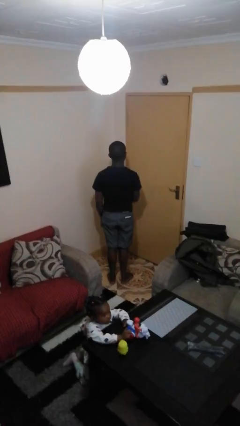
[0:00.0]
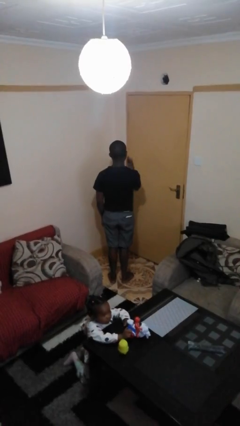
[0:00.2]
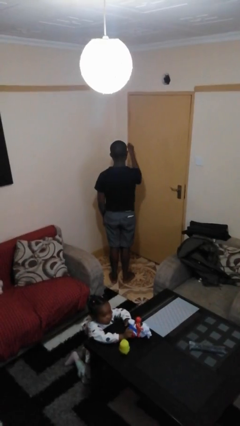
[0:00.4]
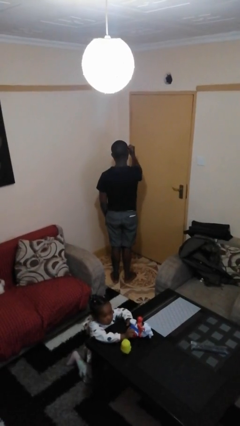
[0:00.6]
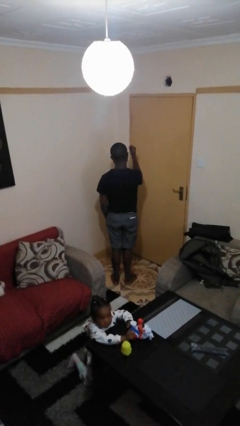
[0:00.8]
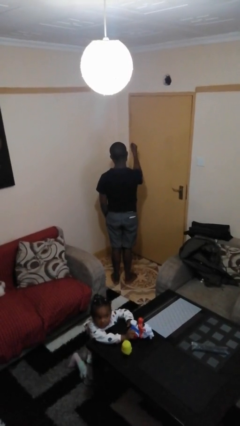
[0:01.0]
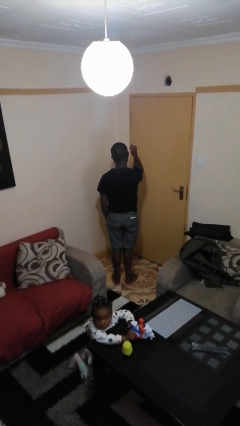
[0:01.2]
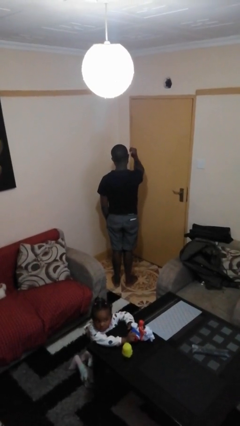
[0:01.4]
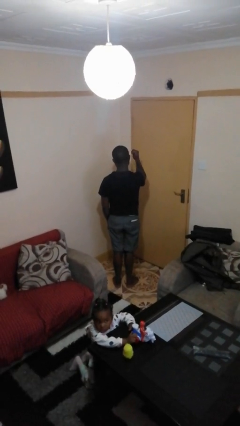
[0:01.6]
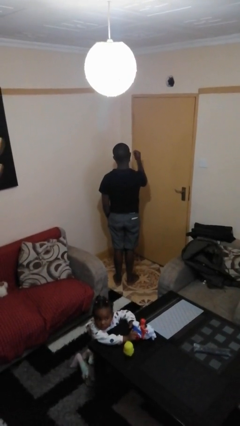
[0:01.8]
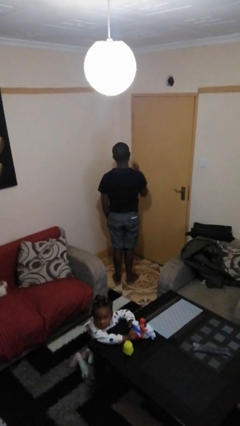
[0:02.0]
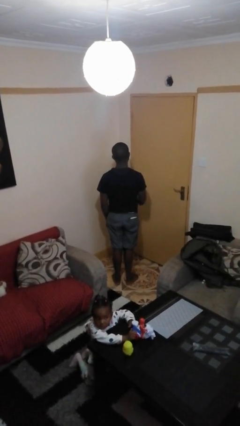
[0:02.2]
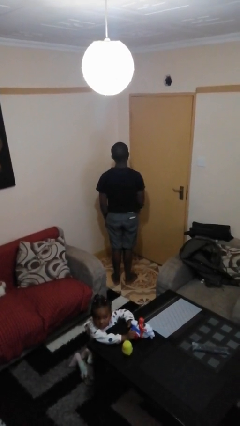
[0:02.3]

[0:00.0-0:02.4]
person gestures behind me

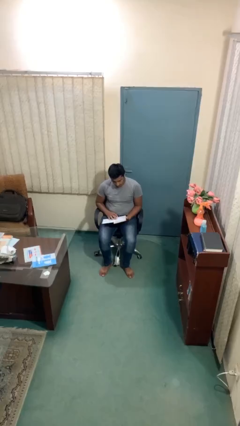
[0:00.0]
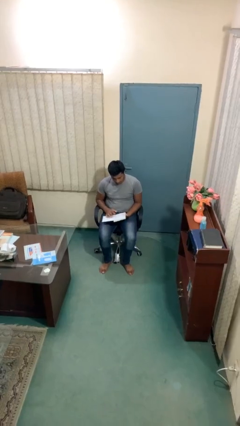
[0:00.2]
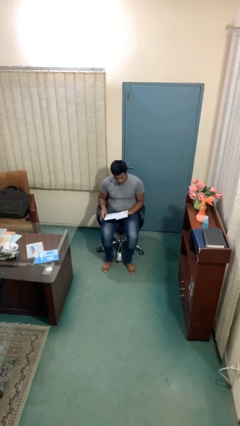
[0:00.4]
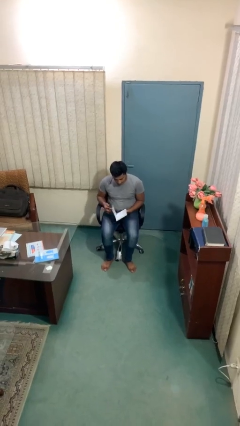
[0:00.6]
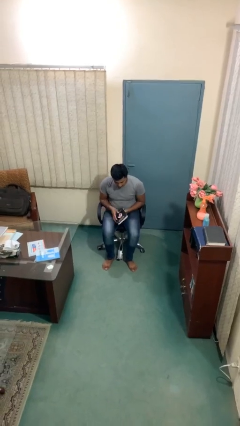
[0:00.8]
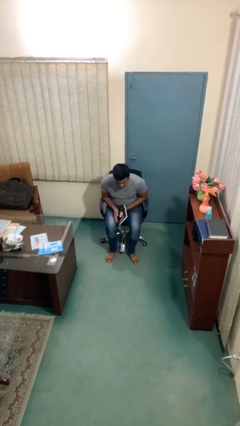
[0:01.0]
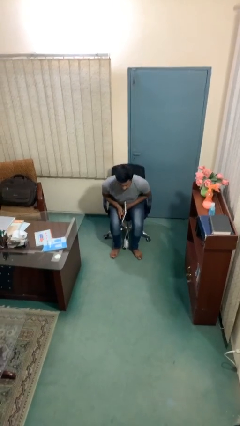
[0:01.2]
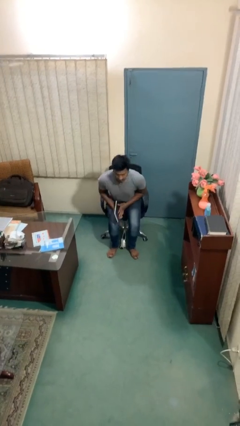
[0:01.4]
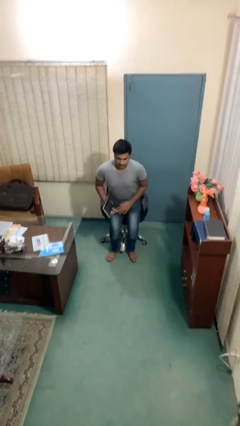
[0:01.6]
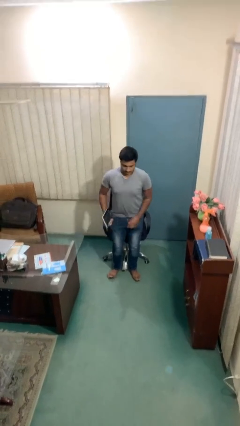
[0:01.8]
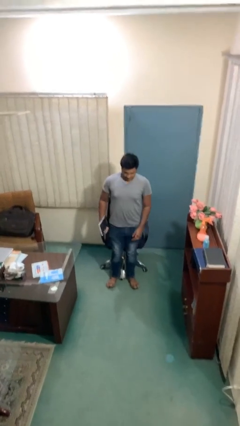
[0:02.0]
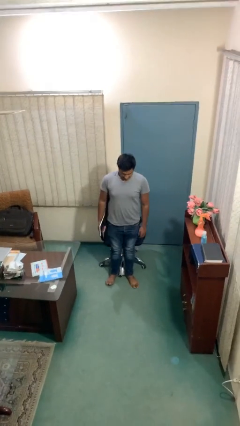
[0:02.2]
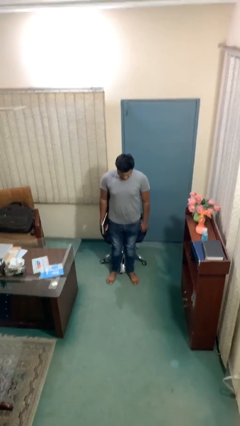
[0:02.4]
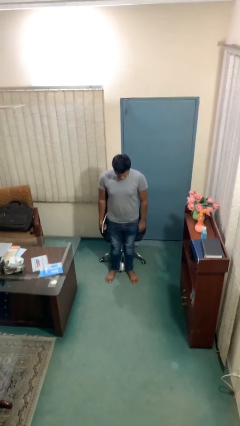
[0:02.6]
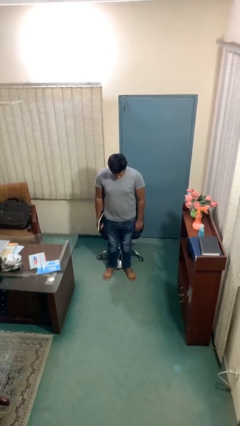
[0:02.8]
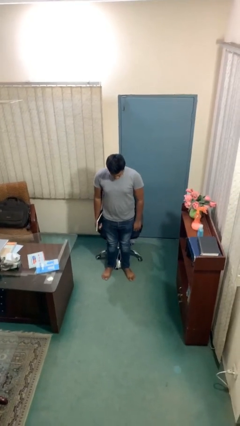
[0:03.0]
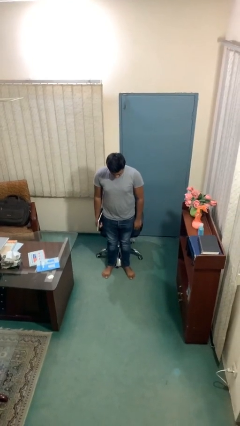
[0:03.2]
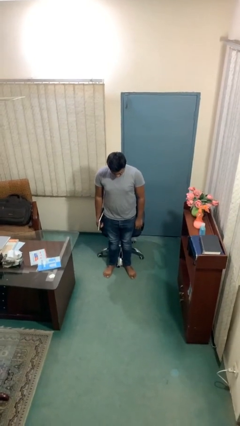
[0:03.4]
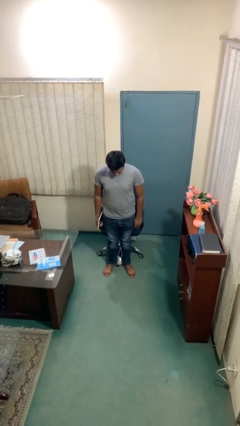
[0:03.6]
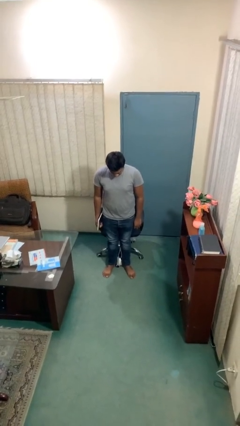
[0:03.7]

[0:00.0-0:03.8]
person stands up

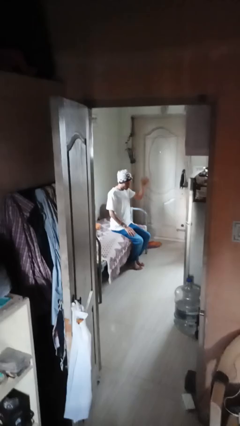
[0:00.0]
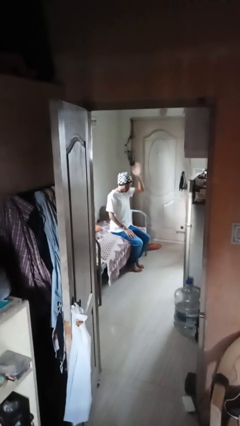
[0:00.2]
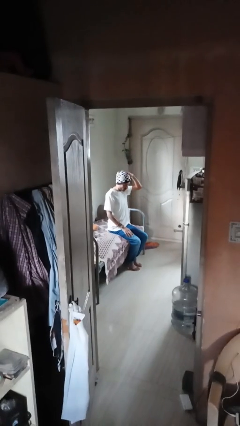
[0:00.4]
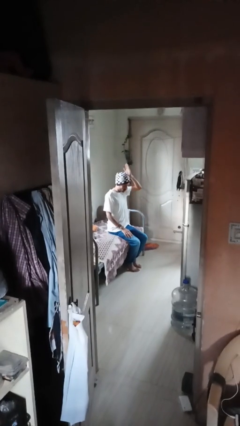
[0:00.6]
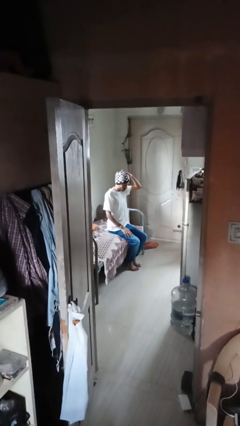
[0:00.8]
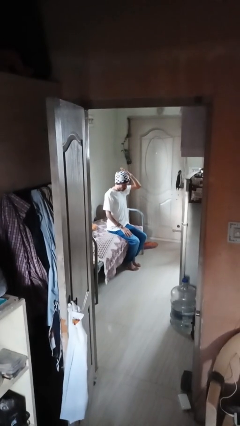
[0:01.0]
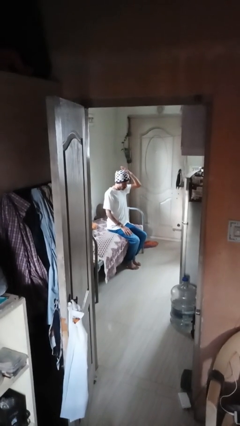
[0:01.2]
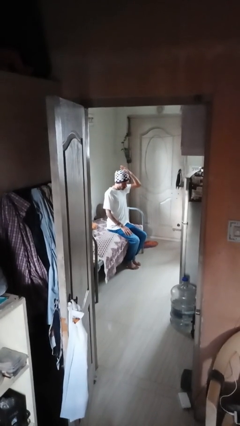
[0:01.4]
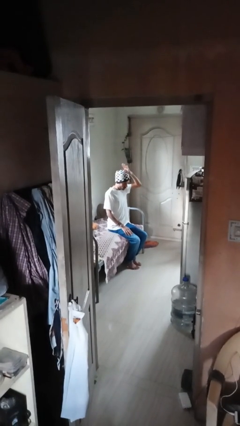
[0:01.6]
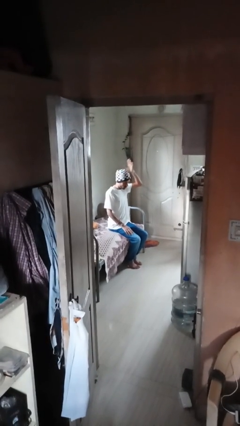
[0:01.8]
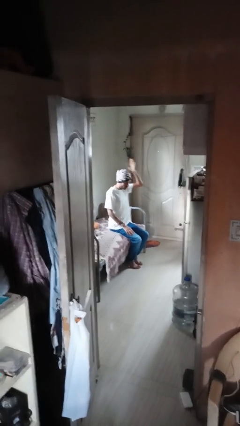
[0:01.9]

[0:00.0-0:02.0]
person pats head

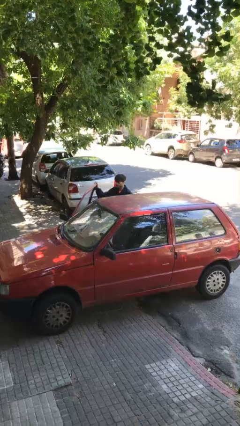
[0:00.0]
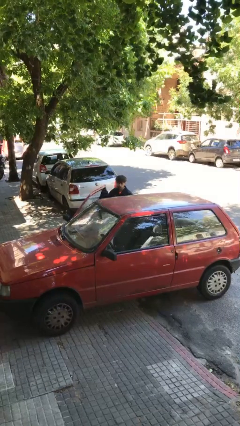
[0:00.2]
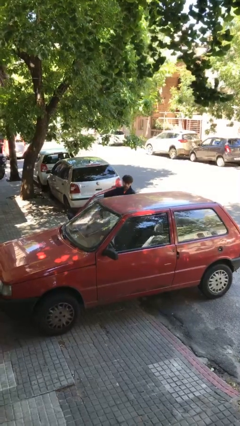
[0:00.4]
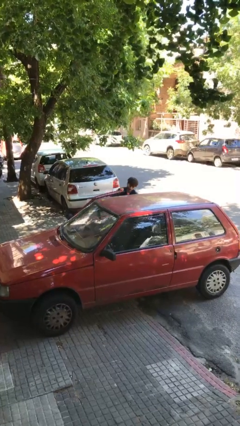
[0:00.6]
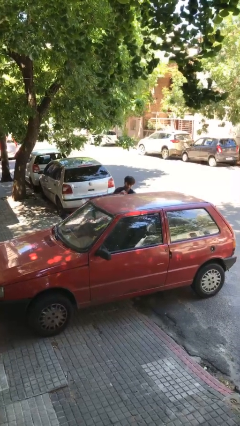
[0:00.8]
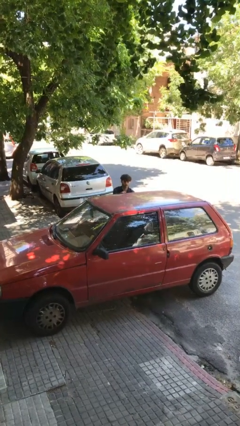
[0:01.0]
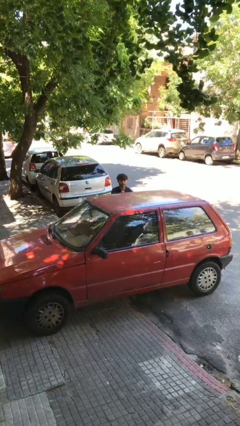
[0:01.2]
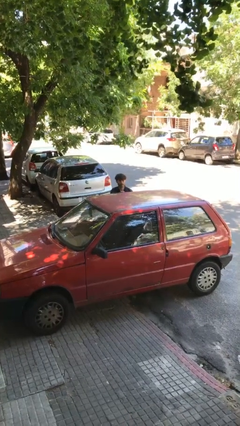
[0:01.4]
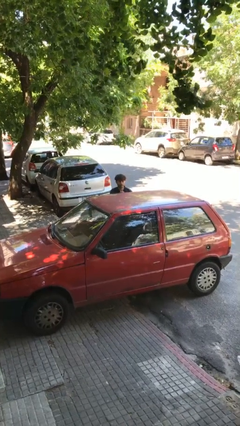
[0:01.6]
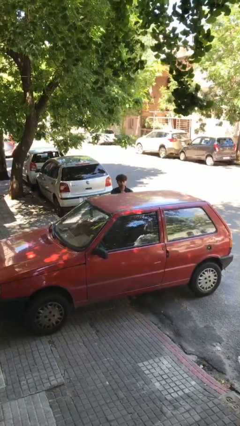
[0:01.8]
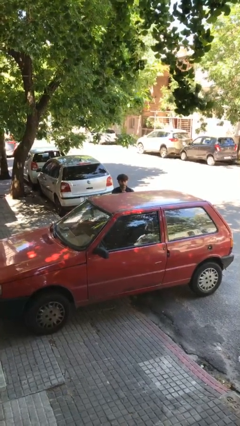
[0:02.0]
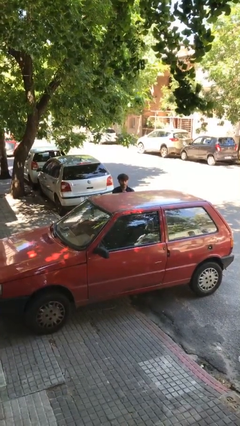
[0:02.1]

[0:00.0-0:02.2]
person closes car door

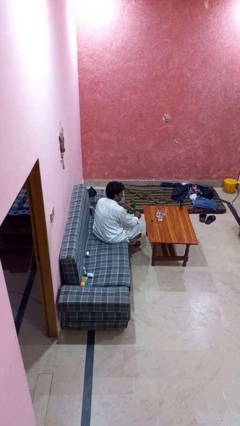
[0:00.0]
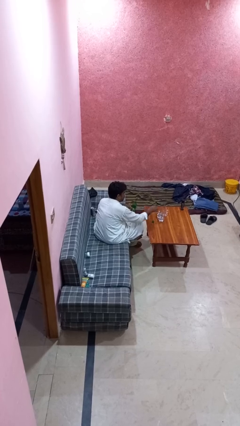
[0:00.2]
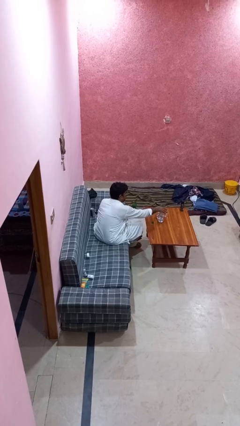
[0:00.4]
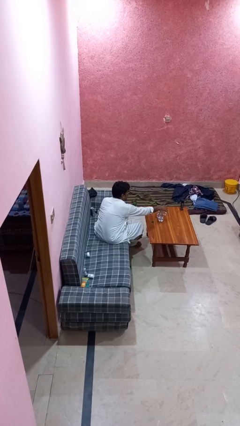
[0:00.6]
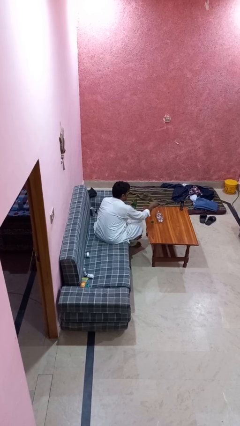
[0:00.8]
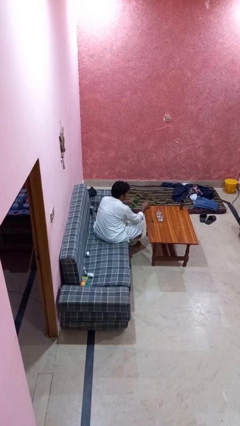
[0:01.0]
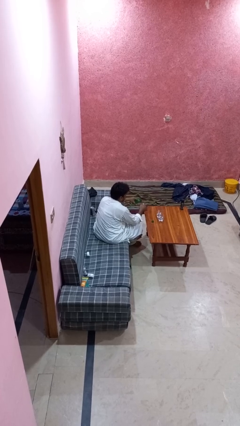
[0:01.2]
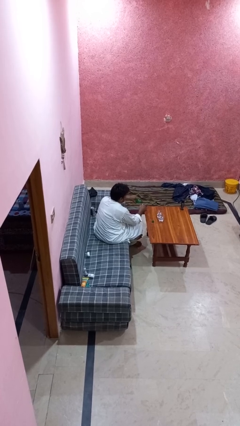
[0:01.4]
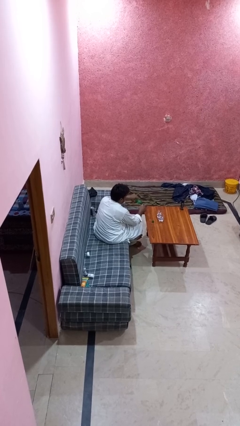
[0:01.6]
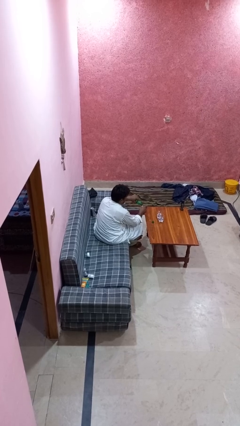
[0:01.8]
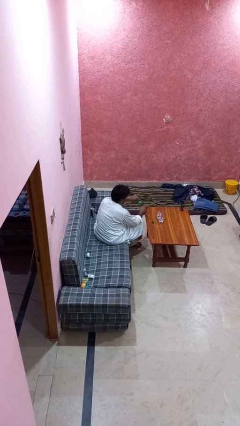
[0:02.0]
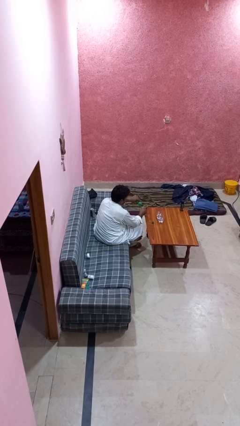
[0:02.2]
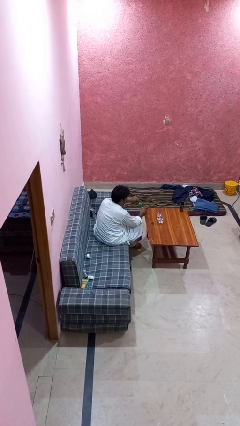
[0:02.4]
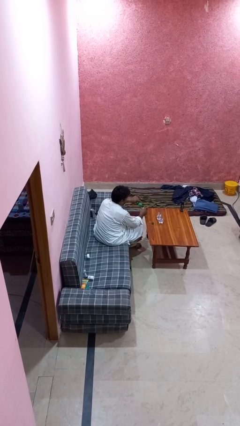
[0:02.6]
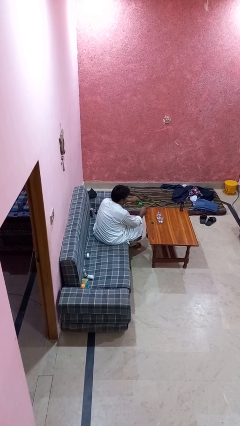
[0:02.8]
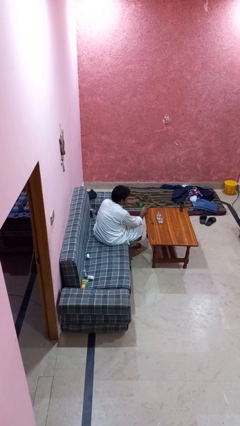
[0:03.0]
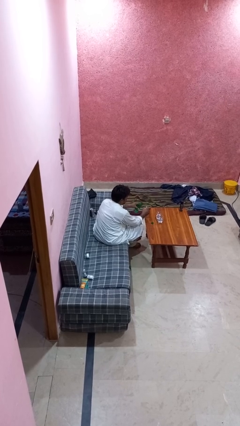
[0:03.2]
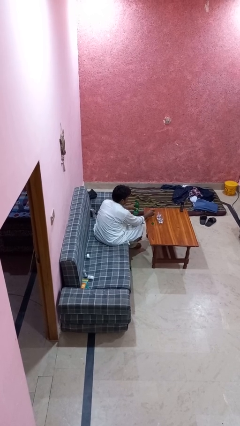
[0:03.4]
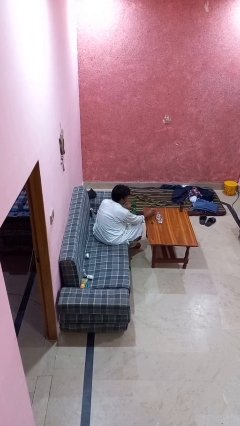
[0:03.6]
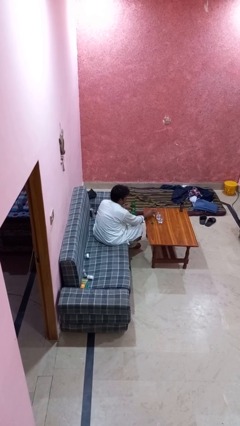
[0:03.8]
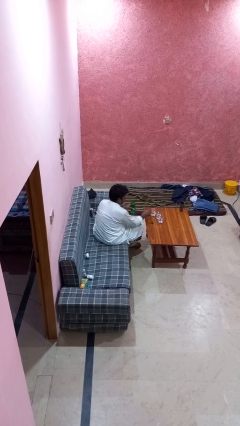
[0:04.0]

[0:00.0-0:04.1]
person pours liquid into cup

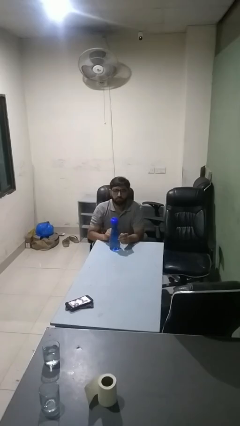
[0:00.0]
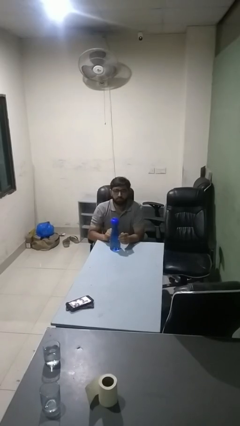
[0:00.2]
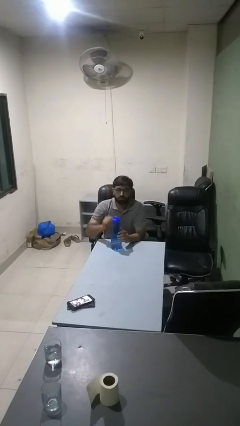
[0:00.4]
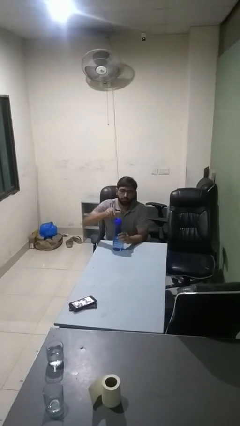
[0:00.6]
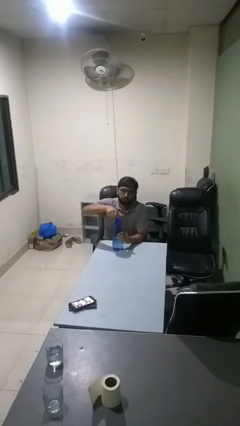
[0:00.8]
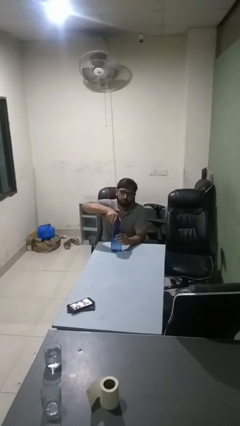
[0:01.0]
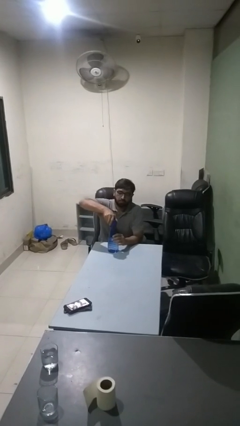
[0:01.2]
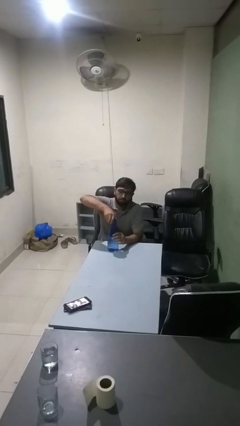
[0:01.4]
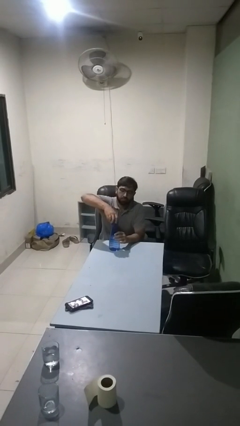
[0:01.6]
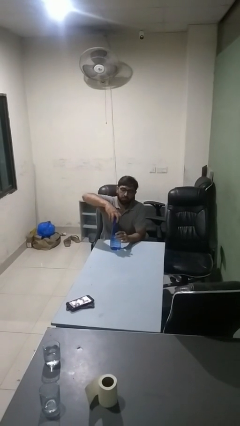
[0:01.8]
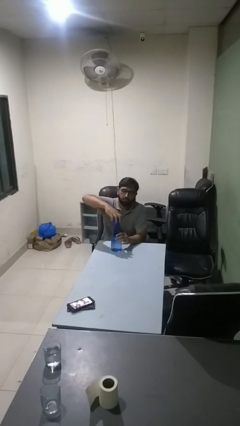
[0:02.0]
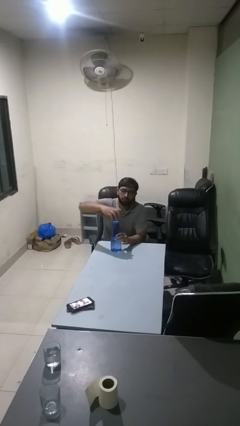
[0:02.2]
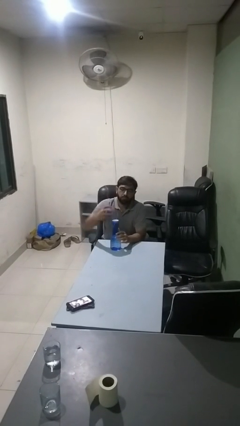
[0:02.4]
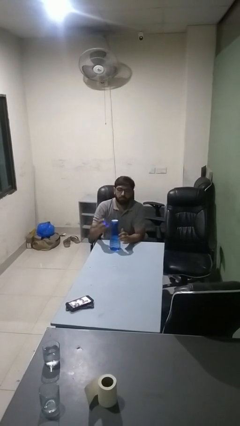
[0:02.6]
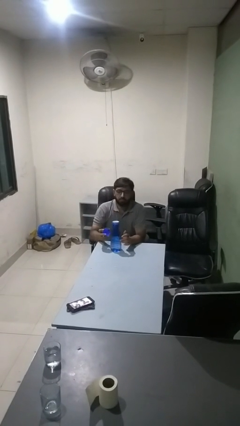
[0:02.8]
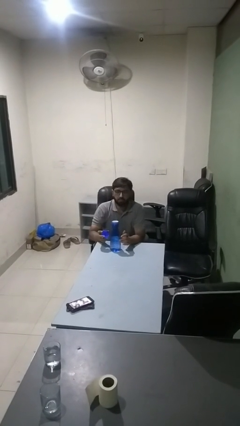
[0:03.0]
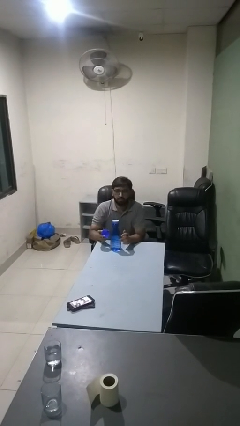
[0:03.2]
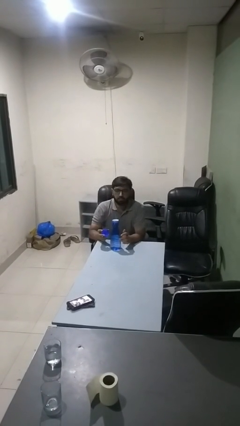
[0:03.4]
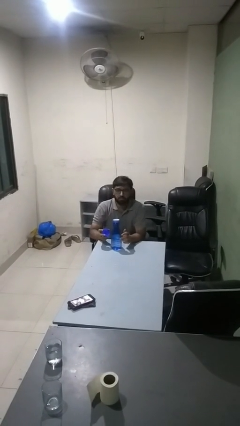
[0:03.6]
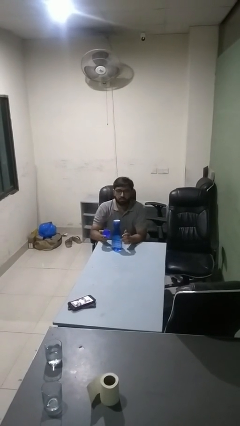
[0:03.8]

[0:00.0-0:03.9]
person unscrews lid from bottle
